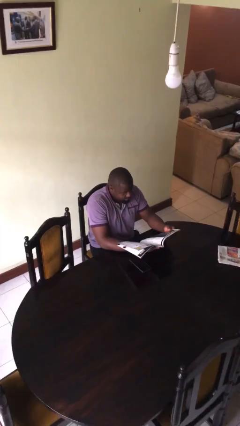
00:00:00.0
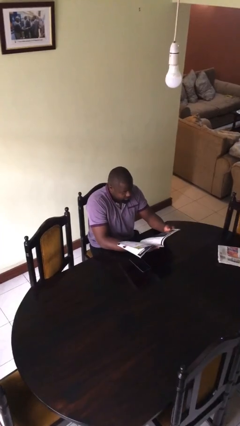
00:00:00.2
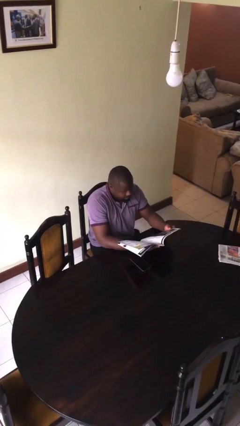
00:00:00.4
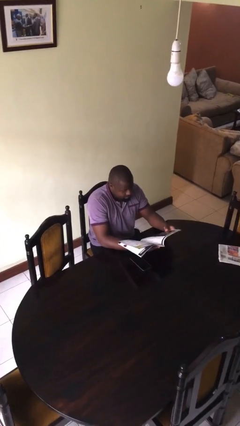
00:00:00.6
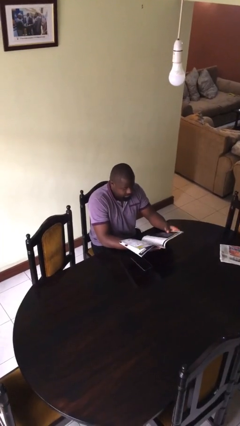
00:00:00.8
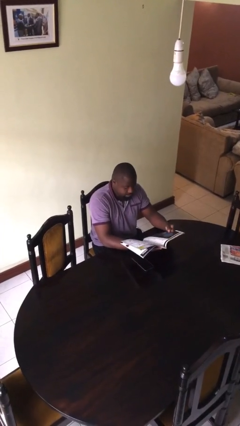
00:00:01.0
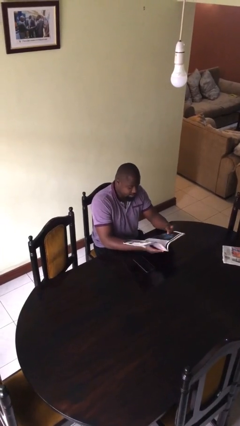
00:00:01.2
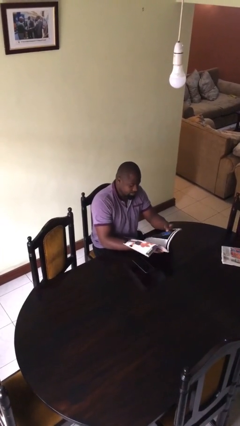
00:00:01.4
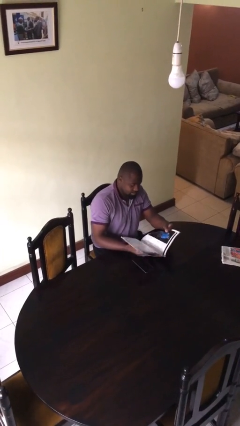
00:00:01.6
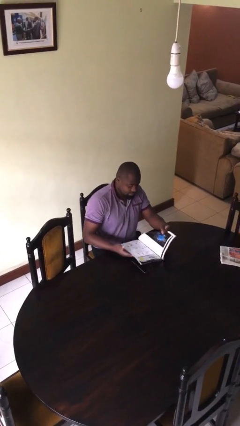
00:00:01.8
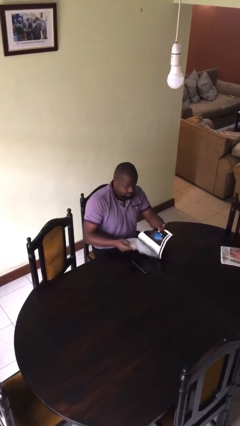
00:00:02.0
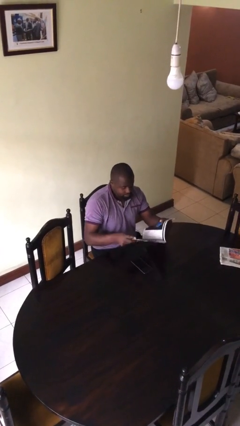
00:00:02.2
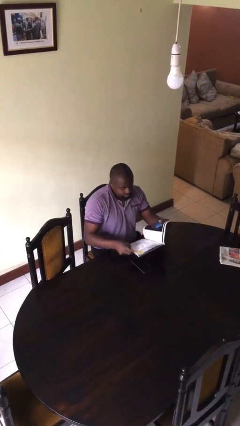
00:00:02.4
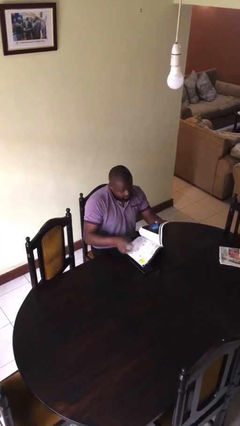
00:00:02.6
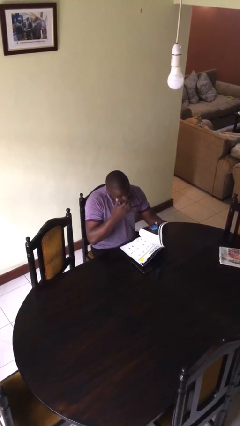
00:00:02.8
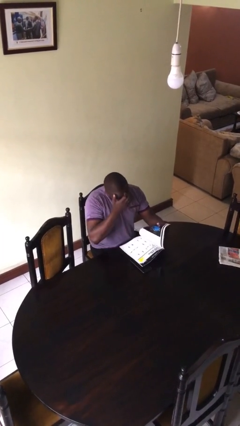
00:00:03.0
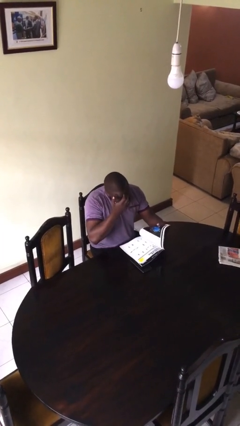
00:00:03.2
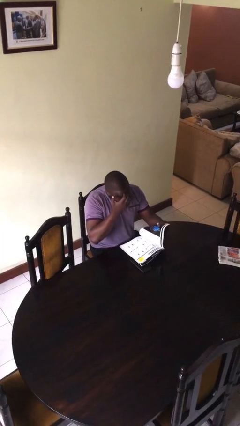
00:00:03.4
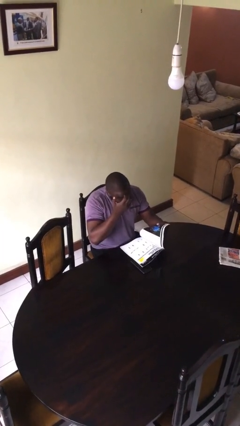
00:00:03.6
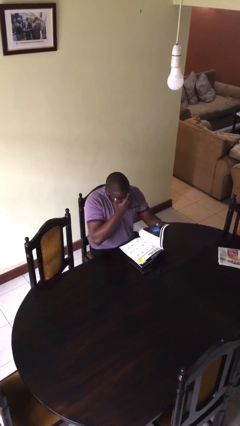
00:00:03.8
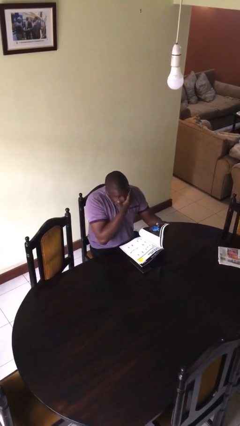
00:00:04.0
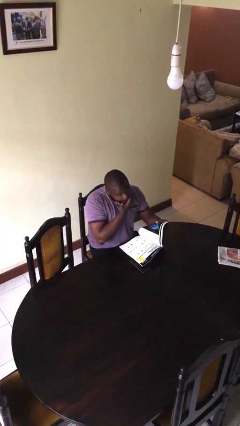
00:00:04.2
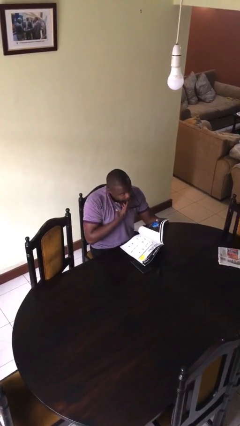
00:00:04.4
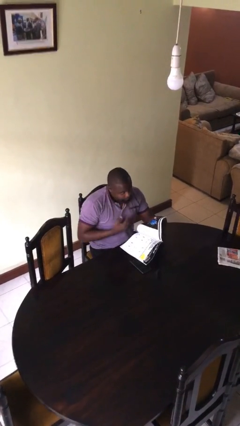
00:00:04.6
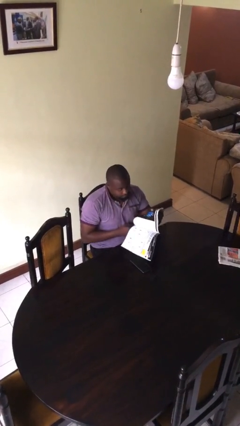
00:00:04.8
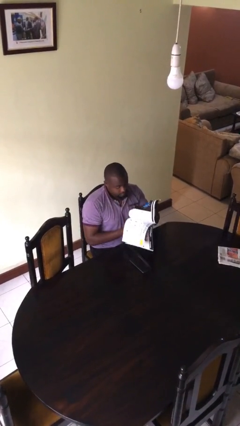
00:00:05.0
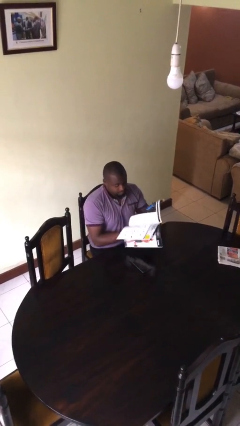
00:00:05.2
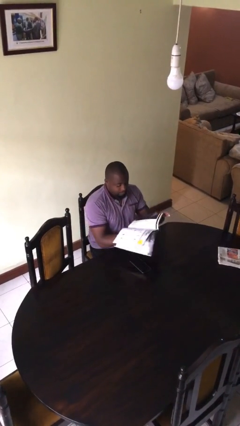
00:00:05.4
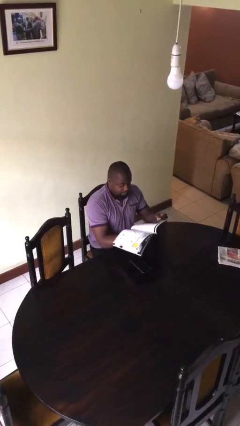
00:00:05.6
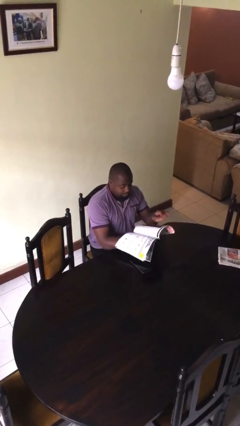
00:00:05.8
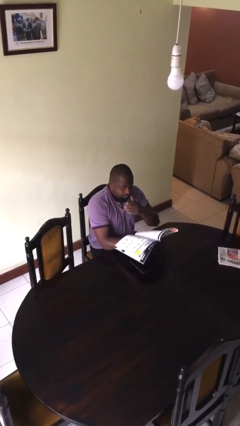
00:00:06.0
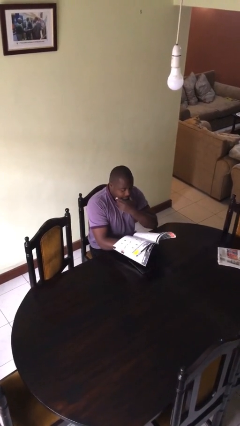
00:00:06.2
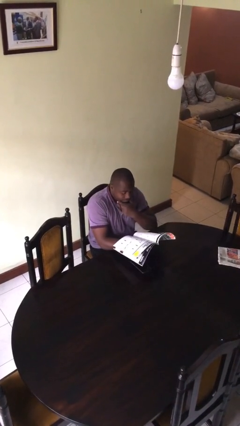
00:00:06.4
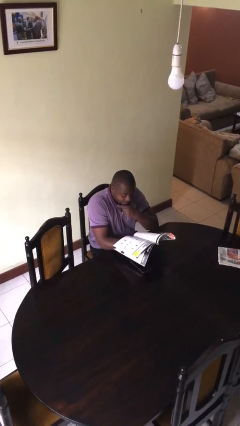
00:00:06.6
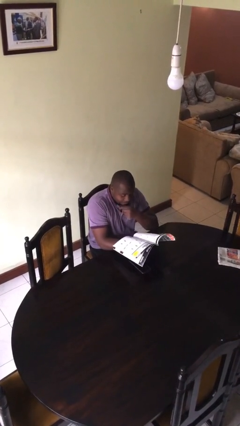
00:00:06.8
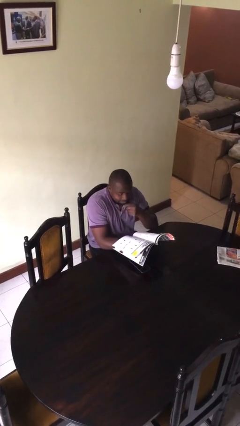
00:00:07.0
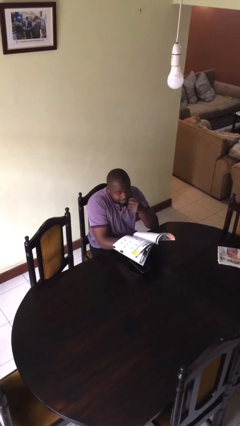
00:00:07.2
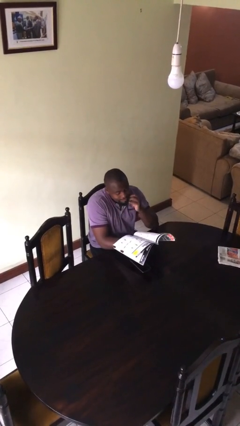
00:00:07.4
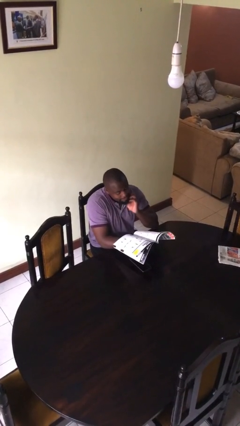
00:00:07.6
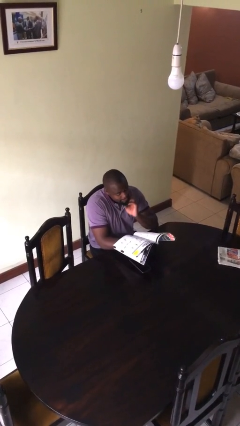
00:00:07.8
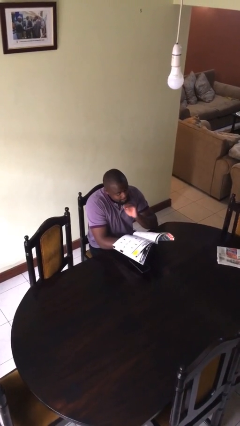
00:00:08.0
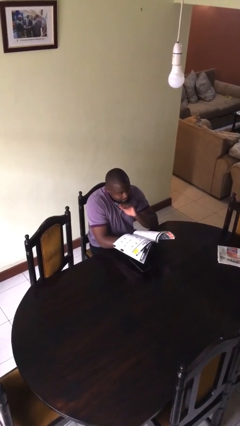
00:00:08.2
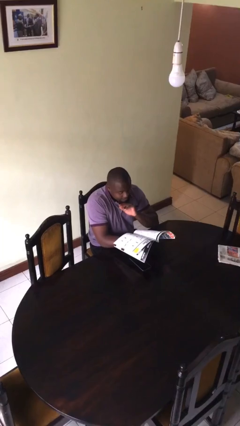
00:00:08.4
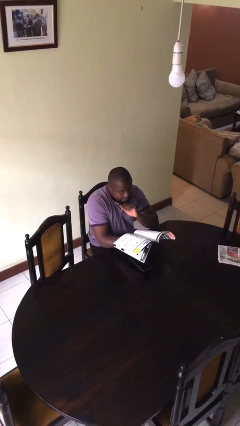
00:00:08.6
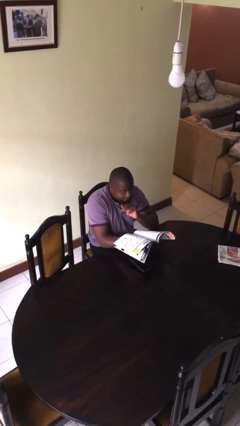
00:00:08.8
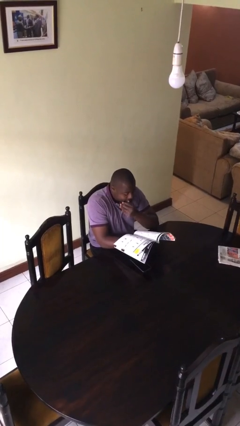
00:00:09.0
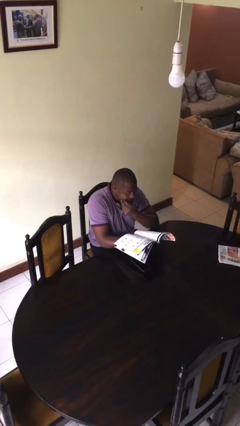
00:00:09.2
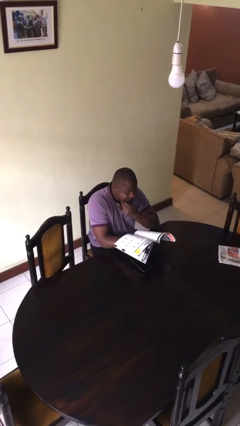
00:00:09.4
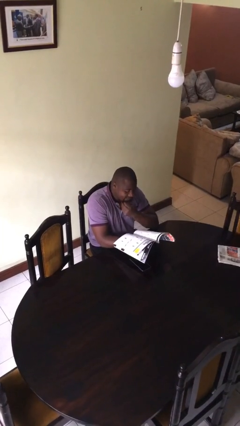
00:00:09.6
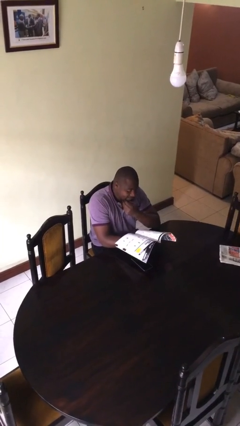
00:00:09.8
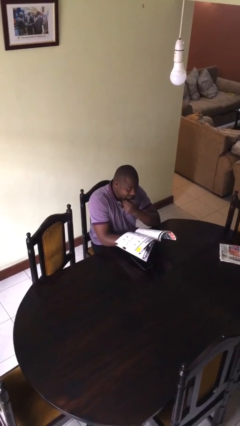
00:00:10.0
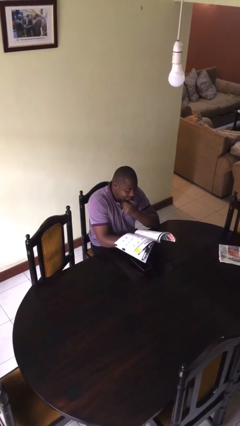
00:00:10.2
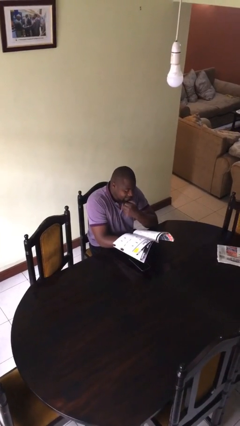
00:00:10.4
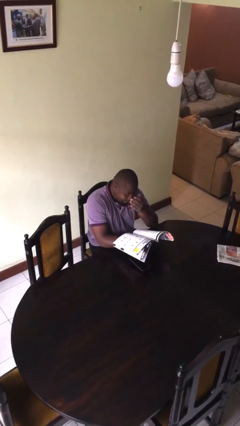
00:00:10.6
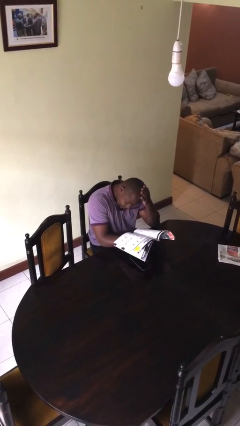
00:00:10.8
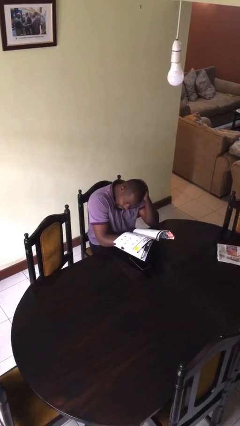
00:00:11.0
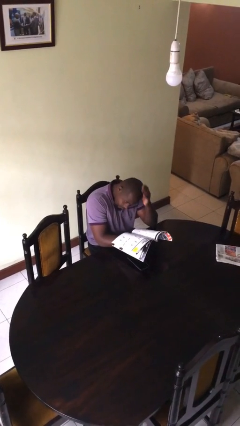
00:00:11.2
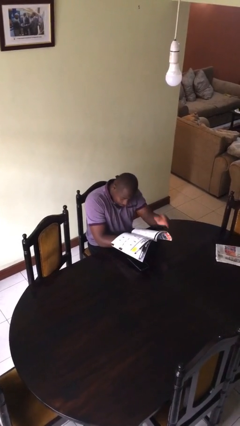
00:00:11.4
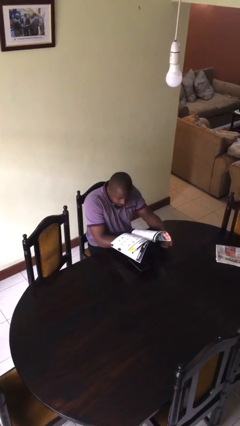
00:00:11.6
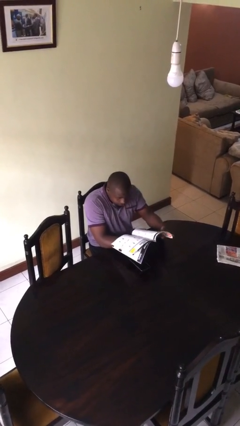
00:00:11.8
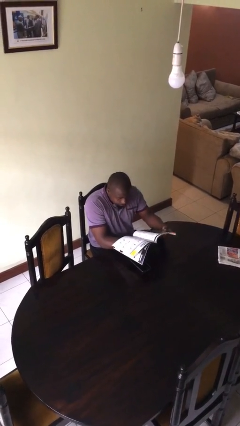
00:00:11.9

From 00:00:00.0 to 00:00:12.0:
person reads document

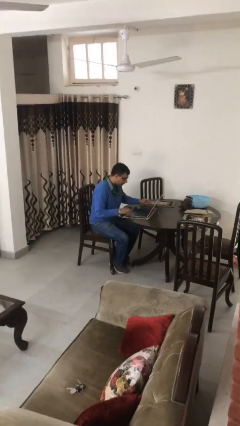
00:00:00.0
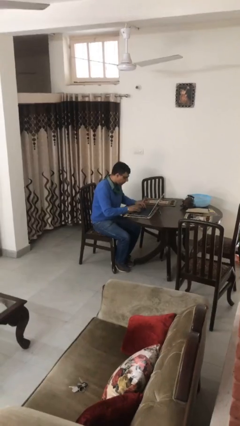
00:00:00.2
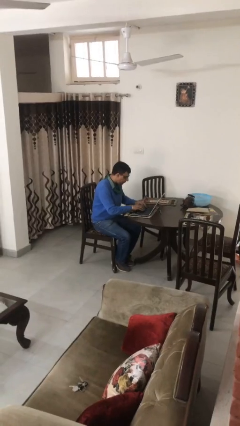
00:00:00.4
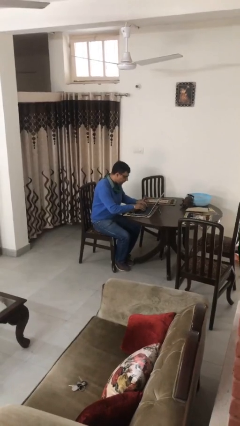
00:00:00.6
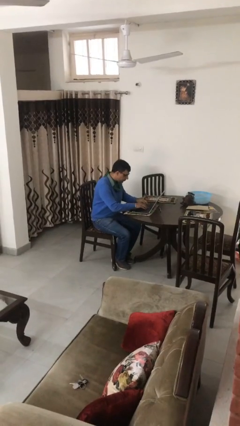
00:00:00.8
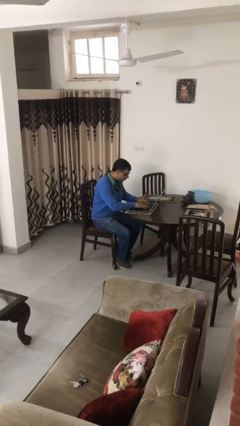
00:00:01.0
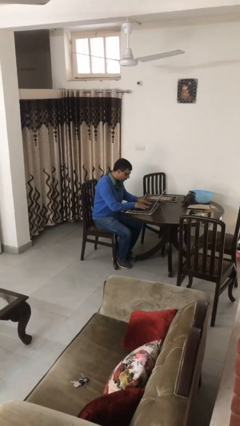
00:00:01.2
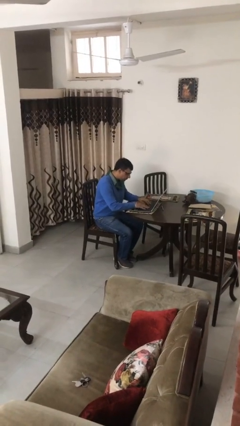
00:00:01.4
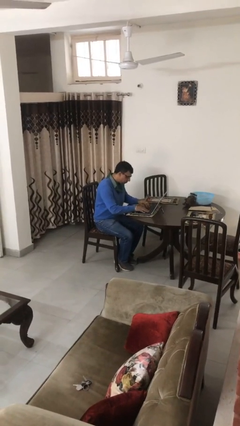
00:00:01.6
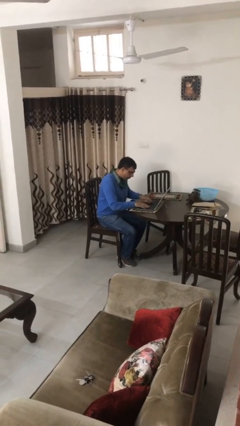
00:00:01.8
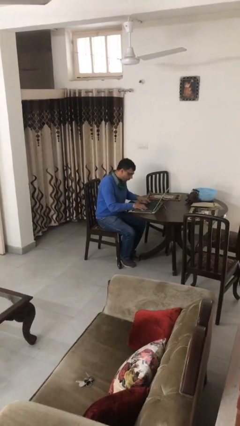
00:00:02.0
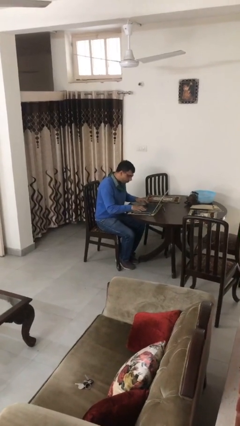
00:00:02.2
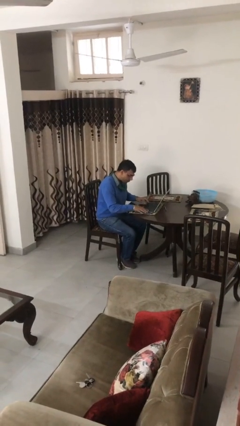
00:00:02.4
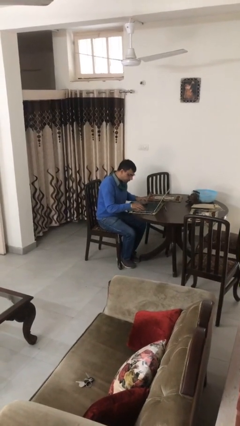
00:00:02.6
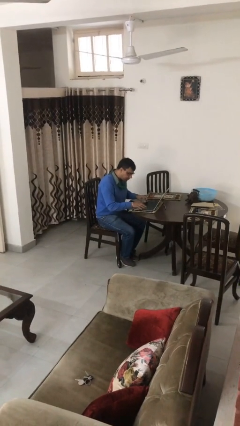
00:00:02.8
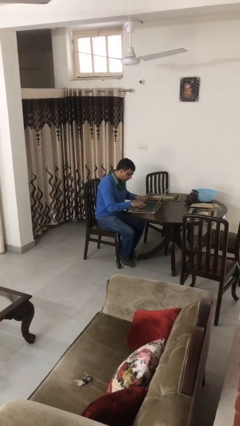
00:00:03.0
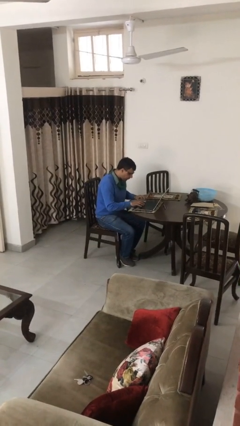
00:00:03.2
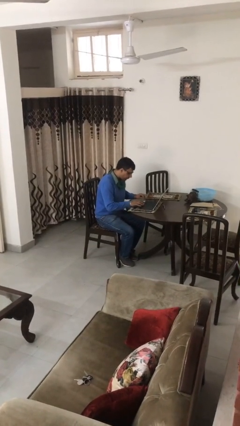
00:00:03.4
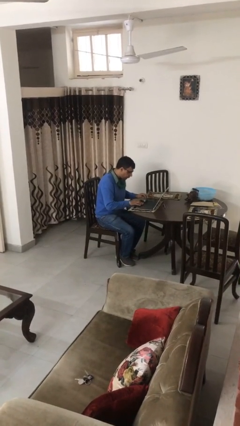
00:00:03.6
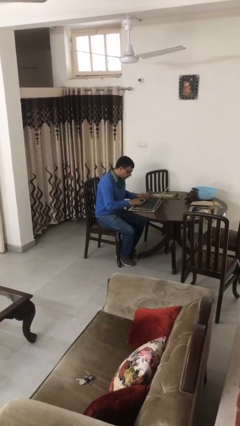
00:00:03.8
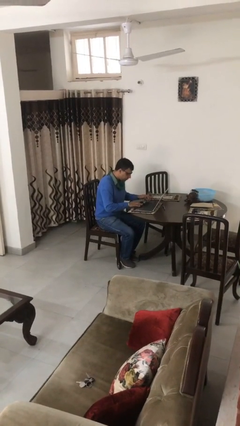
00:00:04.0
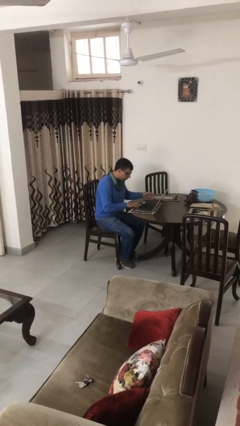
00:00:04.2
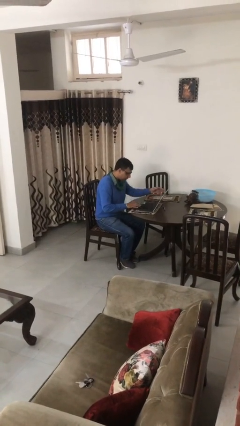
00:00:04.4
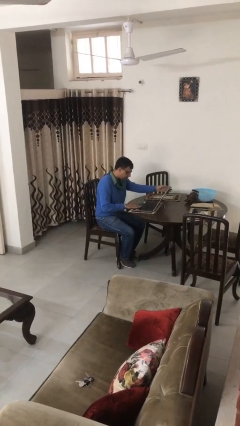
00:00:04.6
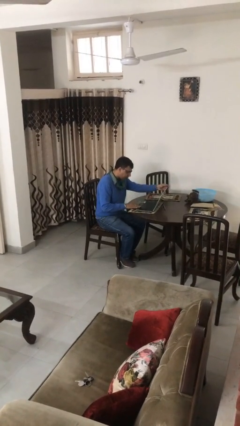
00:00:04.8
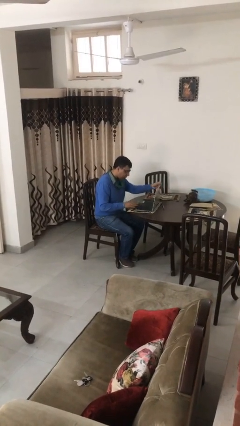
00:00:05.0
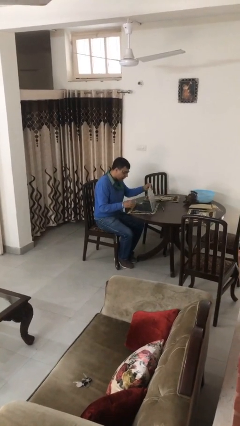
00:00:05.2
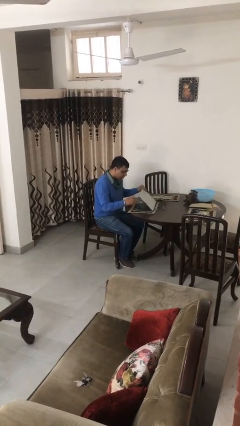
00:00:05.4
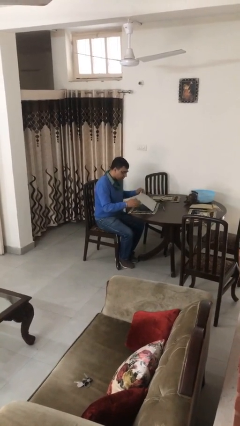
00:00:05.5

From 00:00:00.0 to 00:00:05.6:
person interacts with laptop

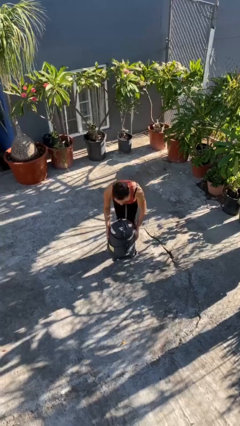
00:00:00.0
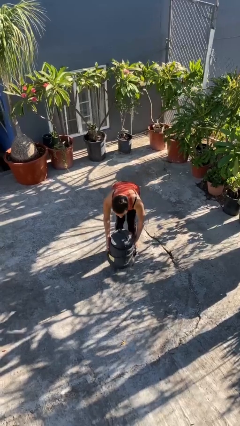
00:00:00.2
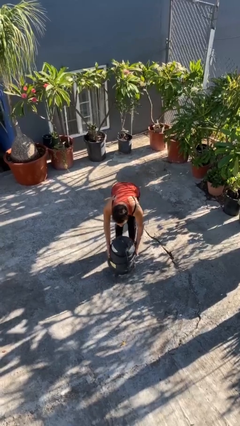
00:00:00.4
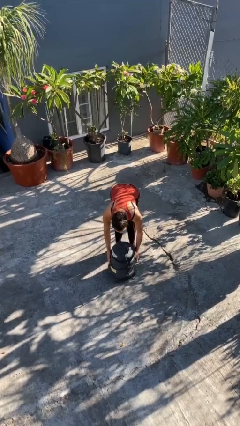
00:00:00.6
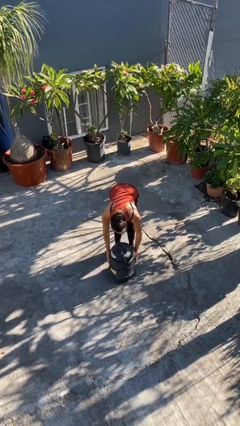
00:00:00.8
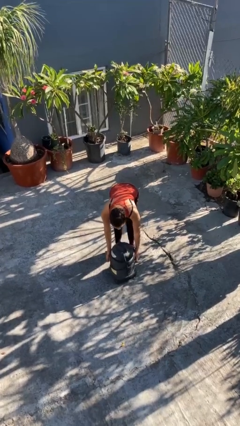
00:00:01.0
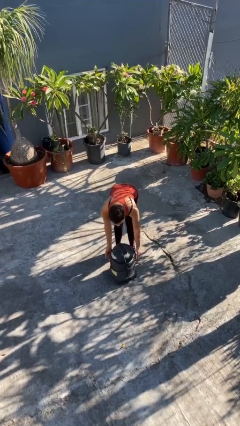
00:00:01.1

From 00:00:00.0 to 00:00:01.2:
person puts down object on floor
